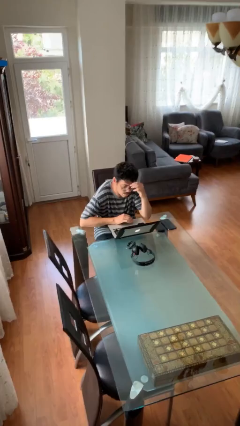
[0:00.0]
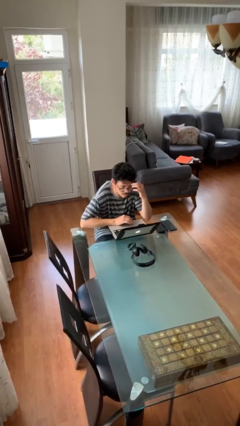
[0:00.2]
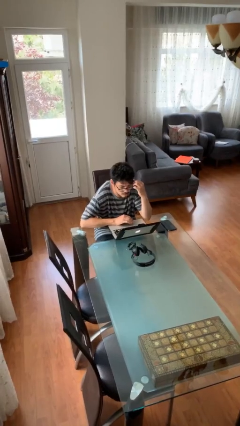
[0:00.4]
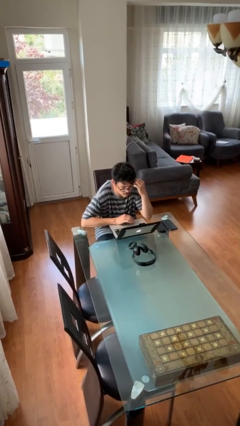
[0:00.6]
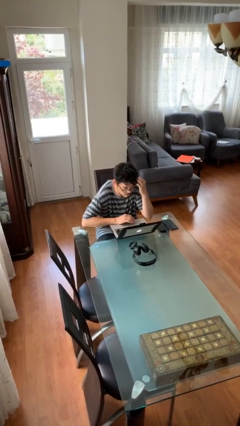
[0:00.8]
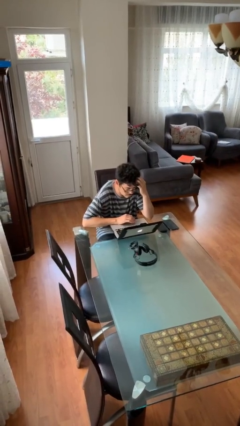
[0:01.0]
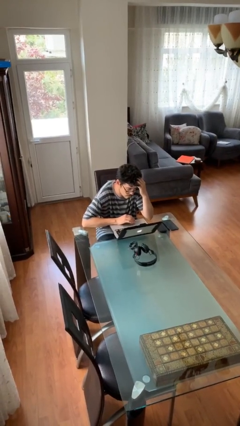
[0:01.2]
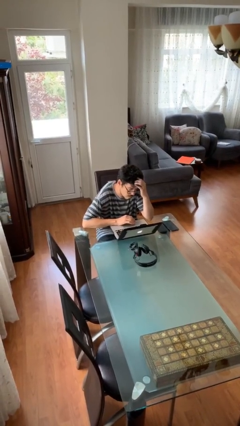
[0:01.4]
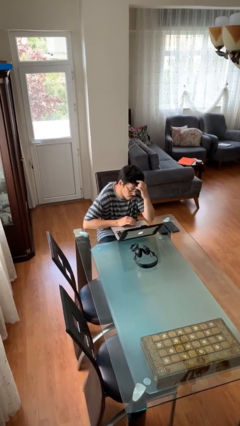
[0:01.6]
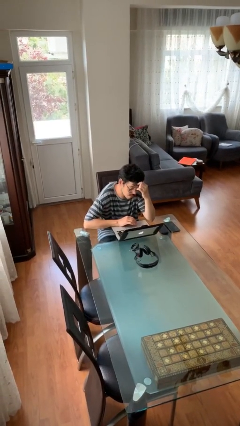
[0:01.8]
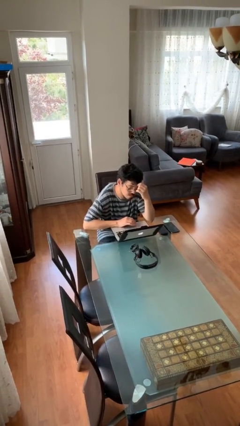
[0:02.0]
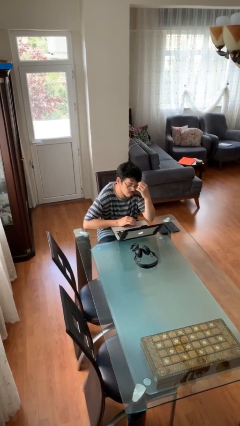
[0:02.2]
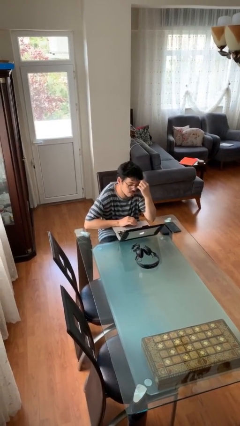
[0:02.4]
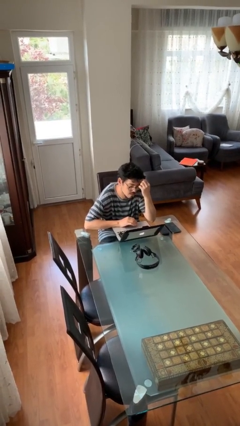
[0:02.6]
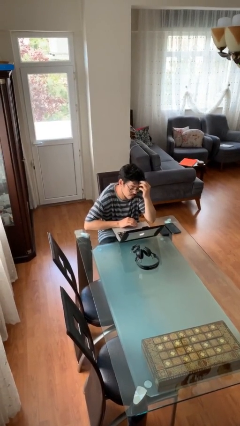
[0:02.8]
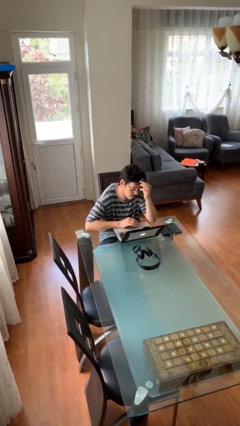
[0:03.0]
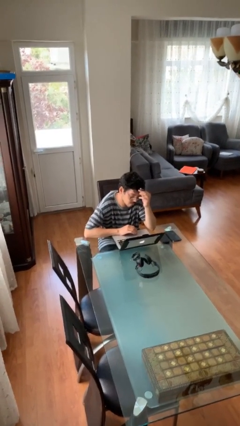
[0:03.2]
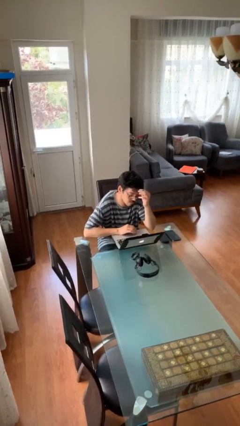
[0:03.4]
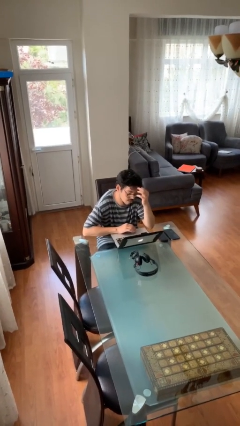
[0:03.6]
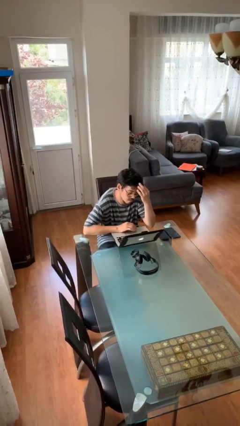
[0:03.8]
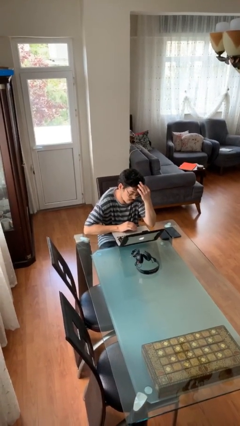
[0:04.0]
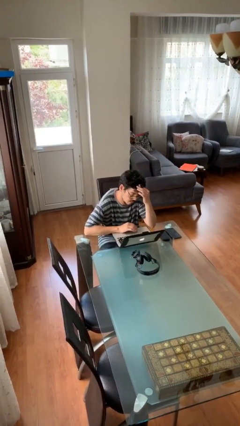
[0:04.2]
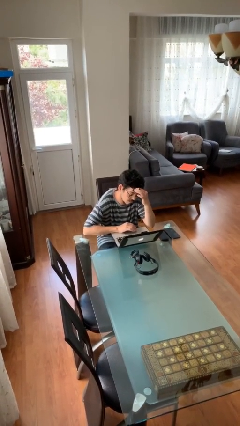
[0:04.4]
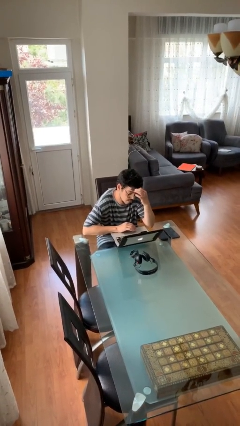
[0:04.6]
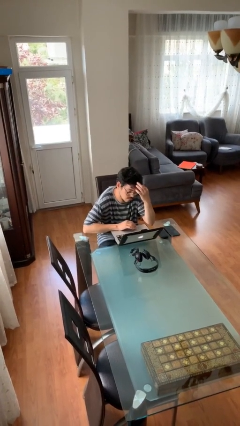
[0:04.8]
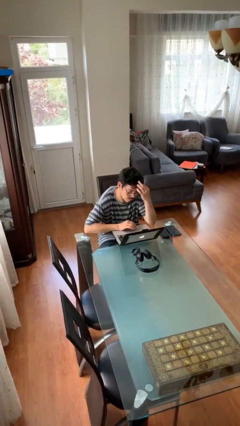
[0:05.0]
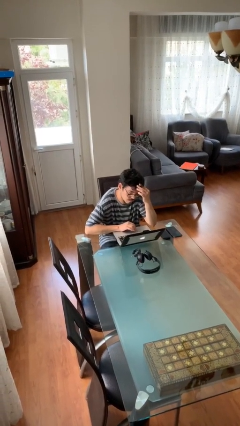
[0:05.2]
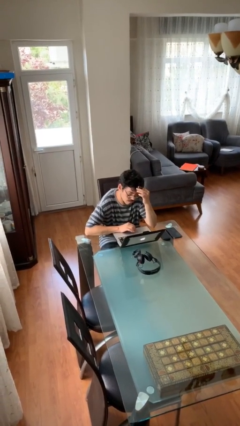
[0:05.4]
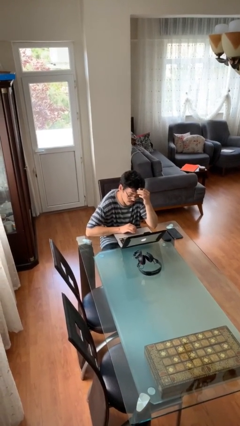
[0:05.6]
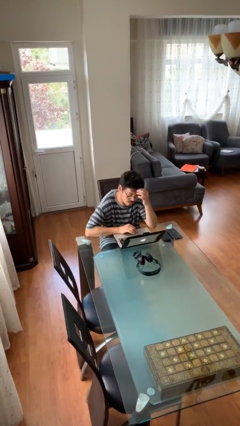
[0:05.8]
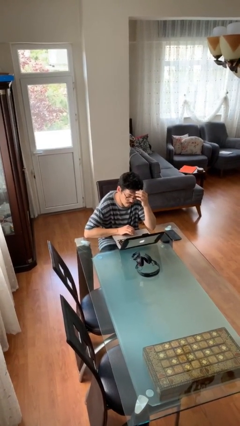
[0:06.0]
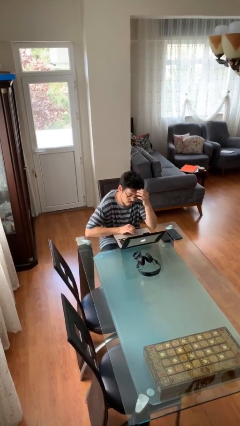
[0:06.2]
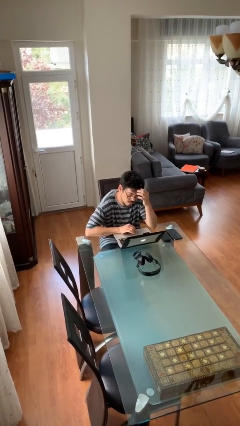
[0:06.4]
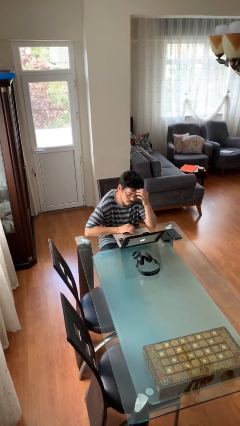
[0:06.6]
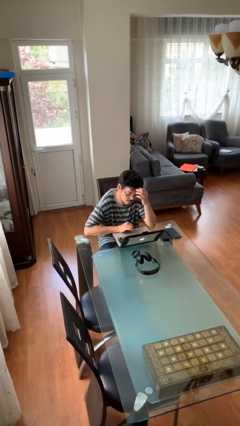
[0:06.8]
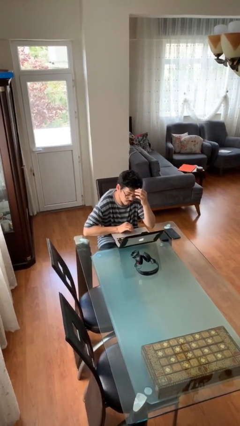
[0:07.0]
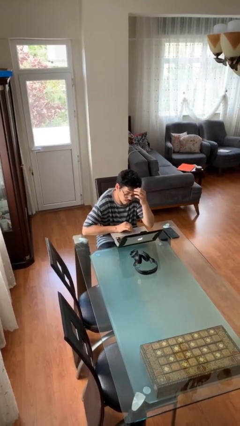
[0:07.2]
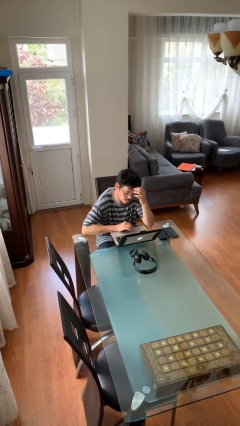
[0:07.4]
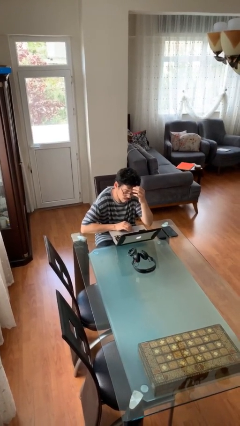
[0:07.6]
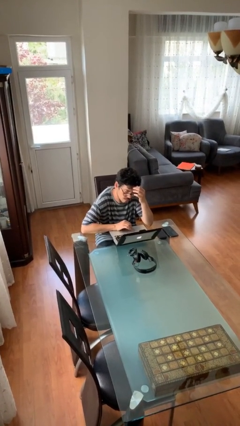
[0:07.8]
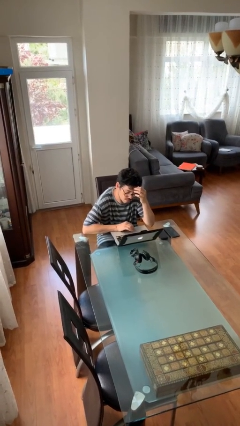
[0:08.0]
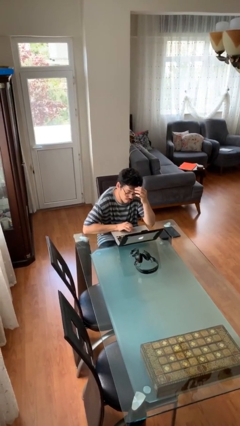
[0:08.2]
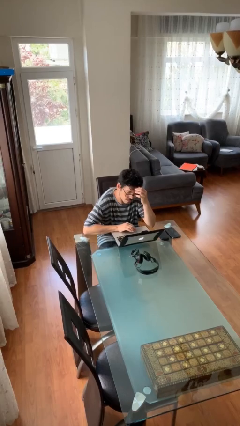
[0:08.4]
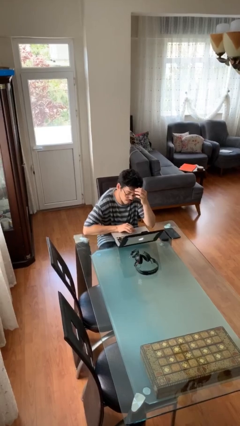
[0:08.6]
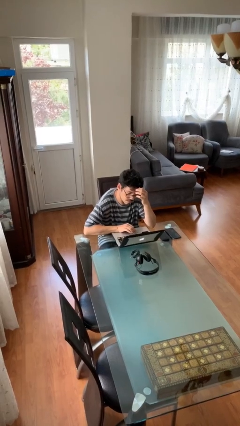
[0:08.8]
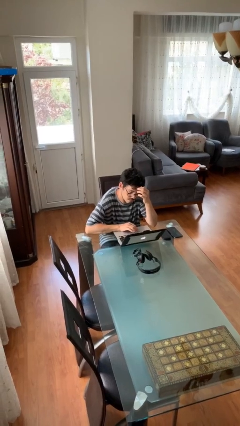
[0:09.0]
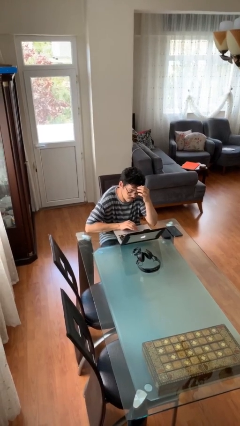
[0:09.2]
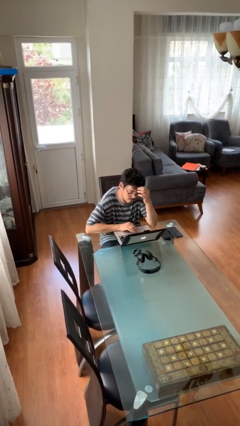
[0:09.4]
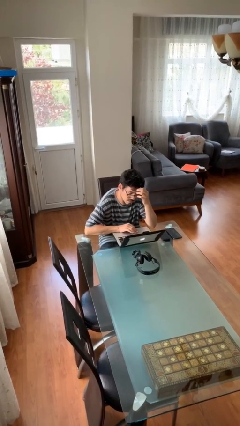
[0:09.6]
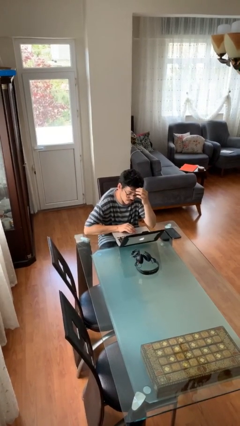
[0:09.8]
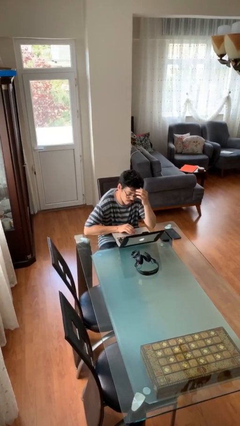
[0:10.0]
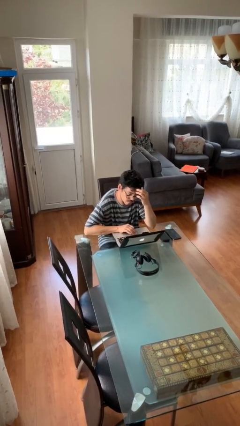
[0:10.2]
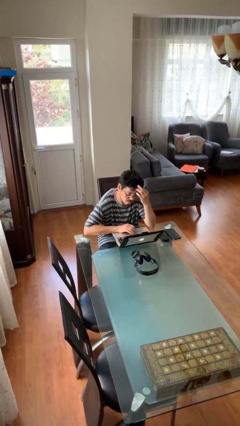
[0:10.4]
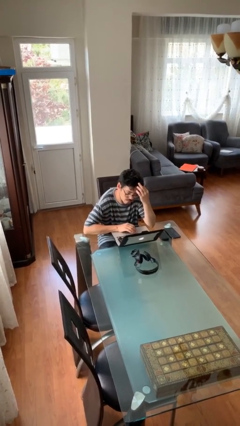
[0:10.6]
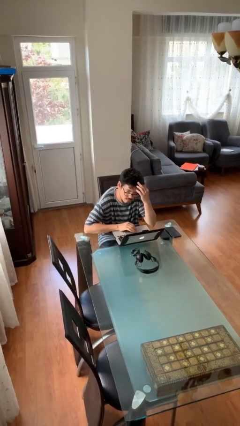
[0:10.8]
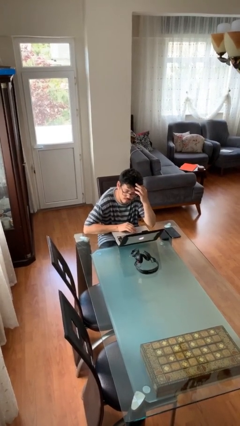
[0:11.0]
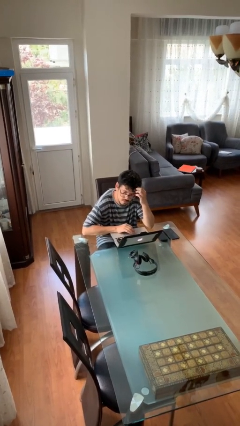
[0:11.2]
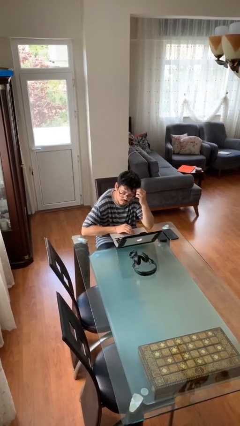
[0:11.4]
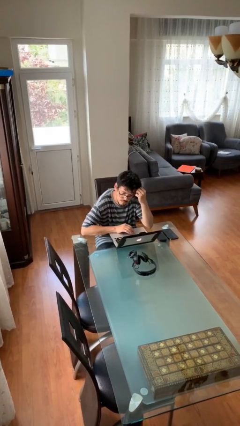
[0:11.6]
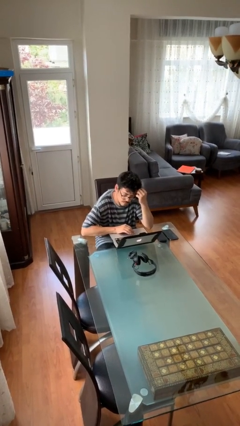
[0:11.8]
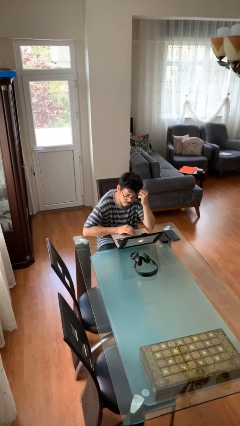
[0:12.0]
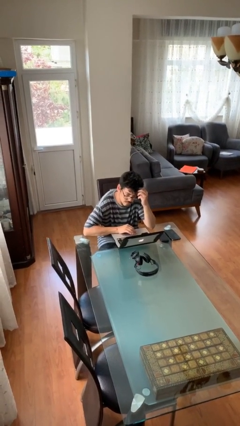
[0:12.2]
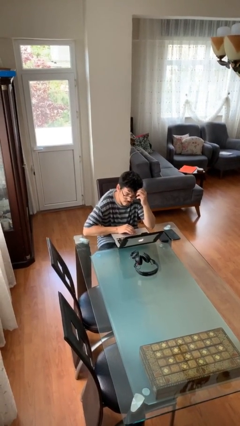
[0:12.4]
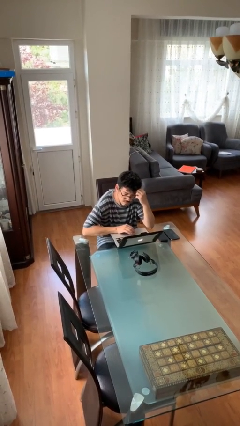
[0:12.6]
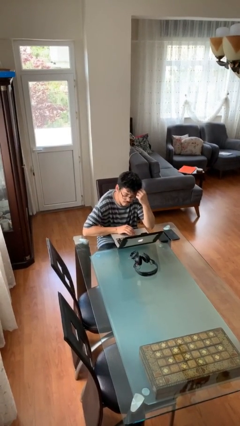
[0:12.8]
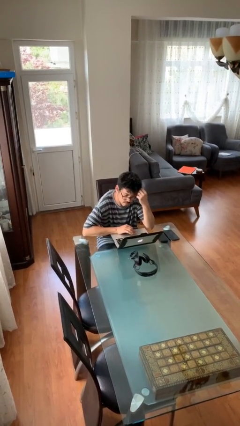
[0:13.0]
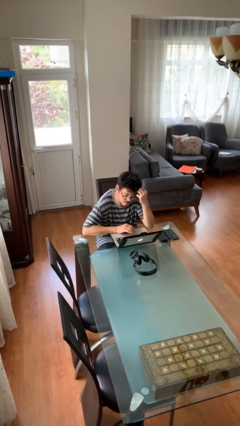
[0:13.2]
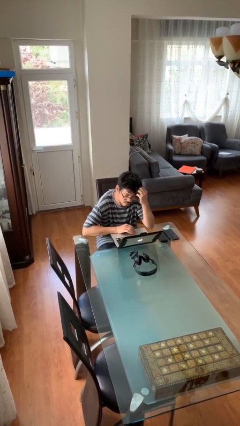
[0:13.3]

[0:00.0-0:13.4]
person interacts with laptop

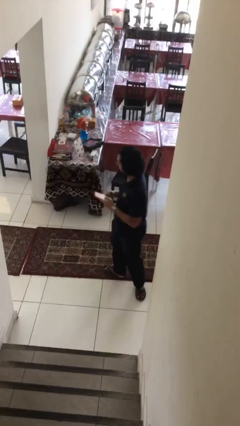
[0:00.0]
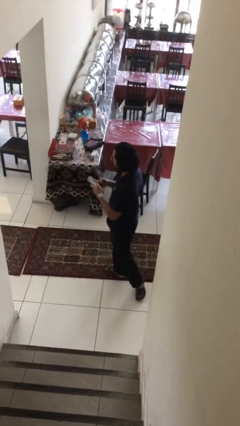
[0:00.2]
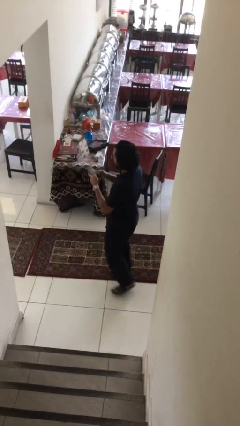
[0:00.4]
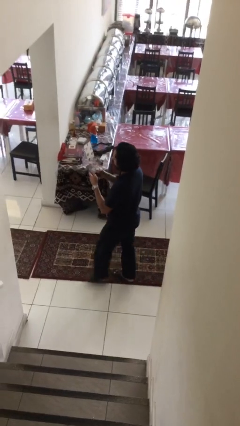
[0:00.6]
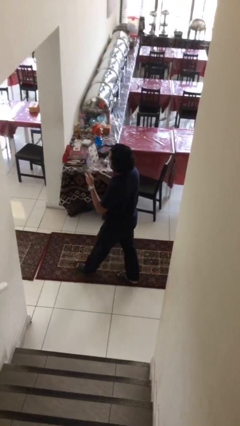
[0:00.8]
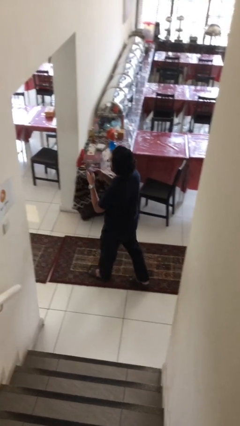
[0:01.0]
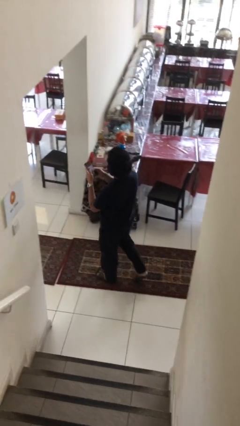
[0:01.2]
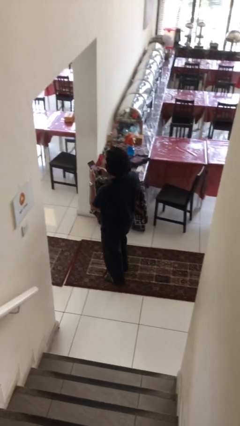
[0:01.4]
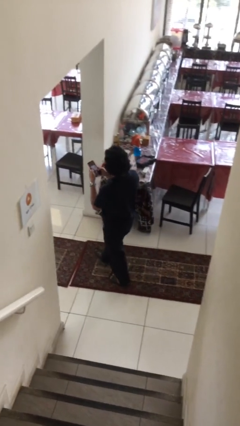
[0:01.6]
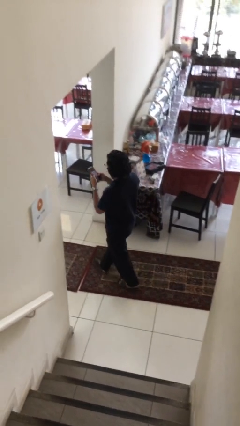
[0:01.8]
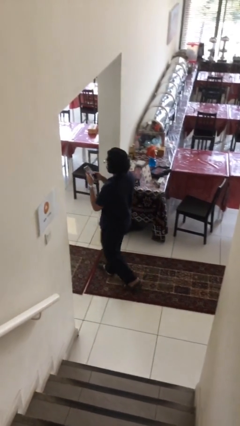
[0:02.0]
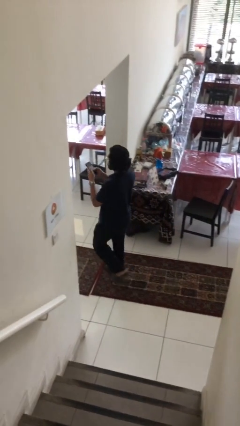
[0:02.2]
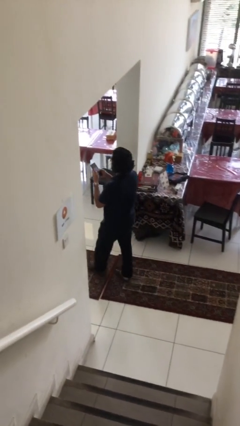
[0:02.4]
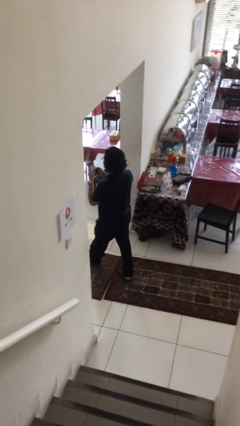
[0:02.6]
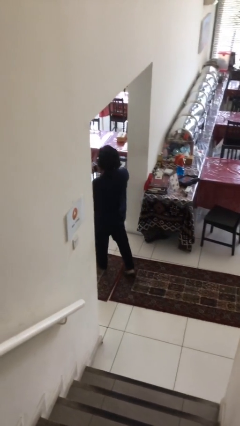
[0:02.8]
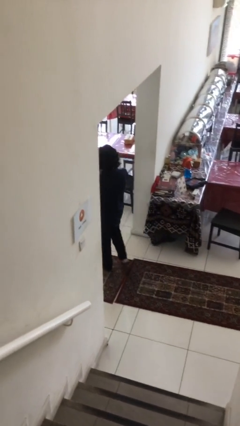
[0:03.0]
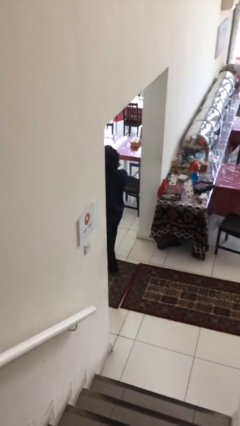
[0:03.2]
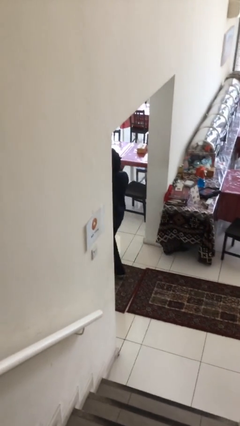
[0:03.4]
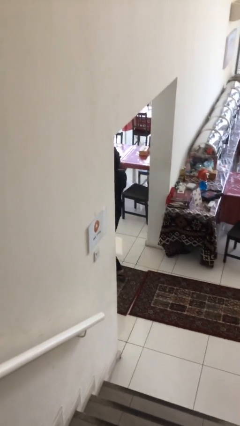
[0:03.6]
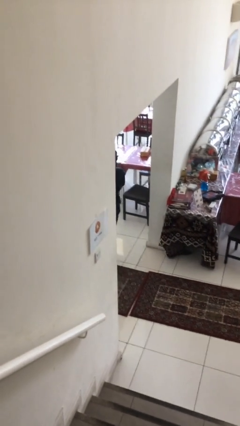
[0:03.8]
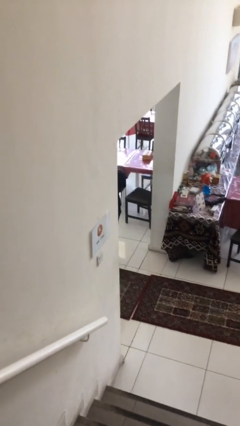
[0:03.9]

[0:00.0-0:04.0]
person exits scene through structure

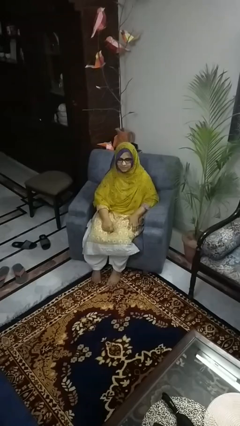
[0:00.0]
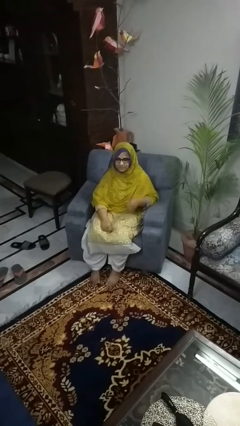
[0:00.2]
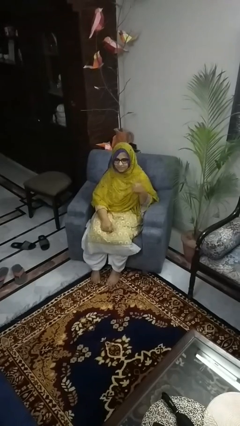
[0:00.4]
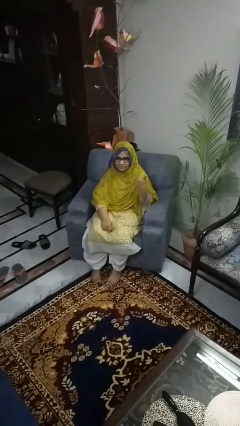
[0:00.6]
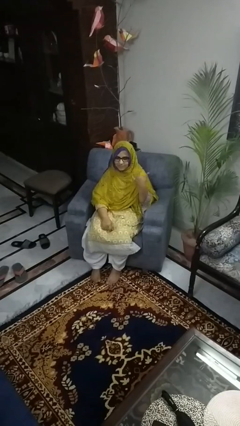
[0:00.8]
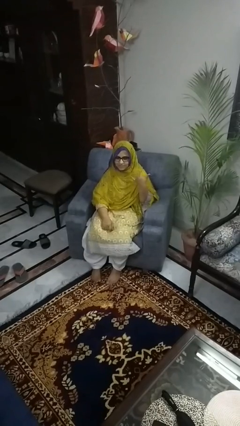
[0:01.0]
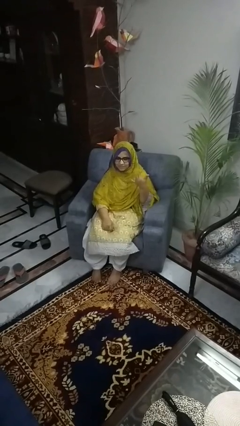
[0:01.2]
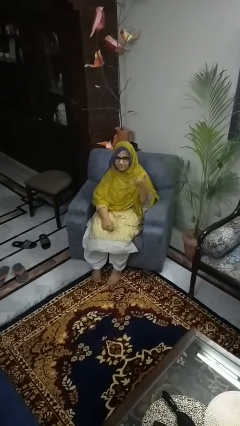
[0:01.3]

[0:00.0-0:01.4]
person gestures hang loose
